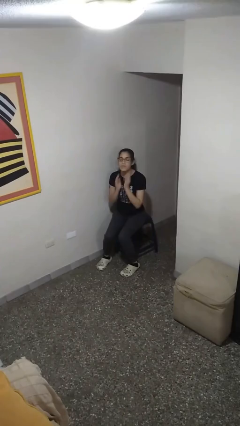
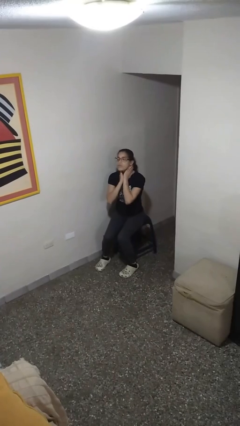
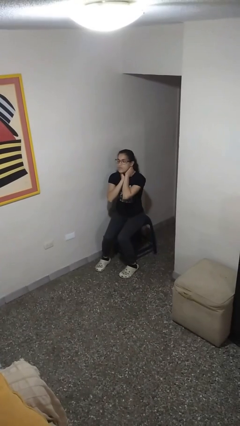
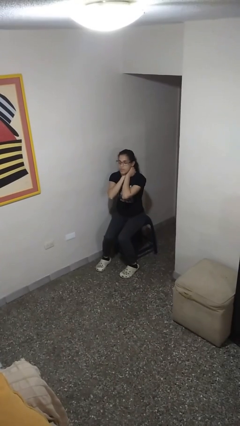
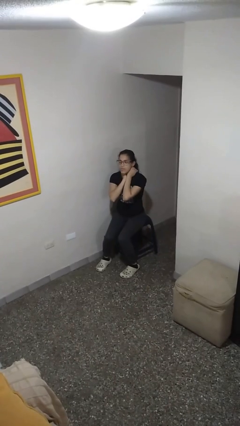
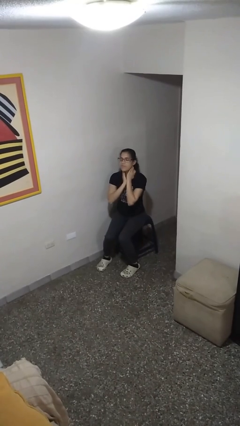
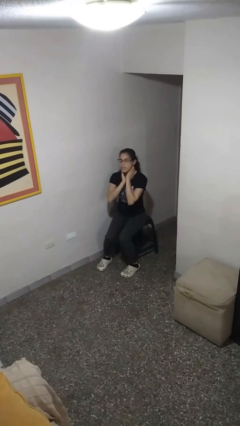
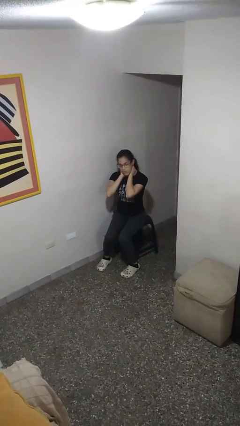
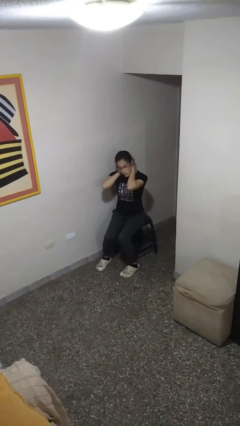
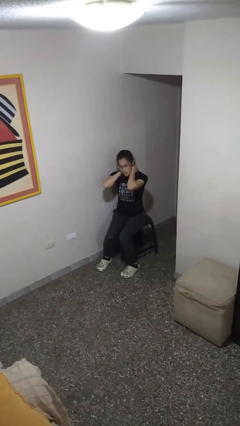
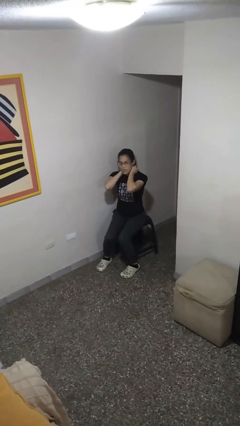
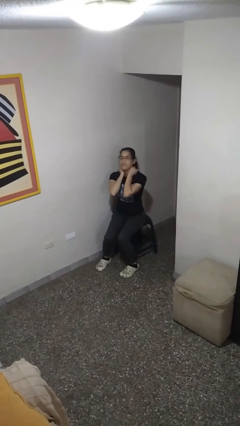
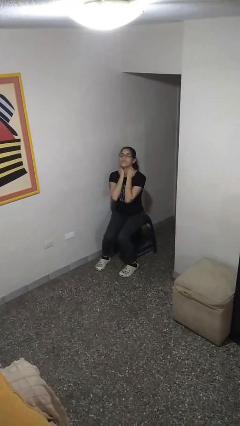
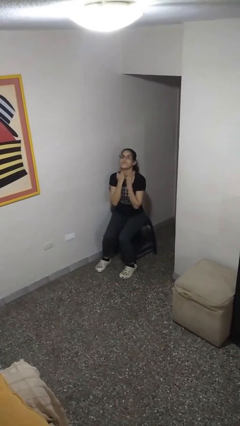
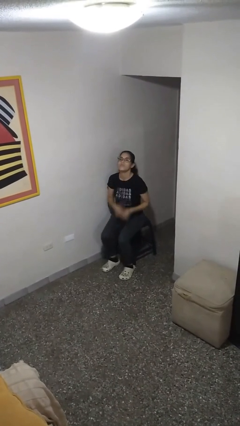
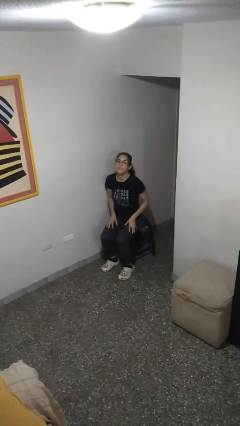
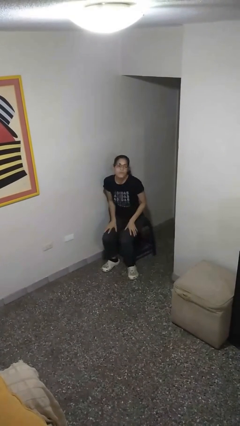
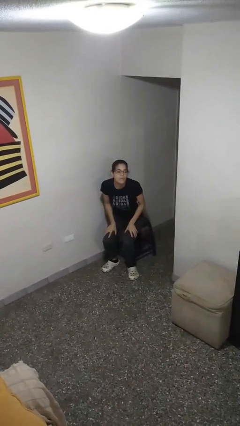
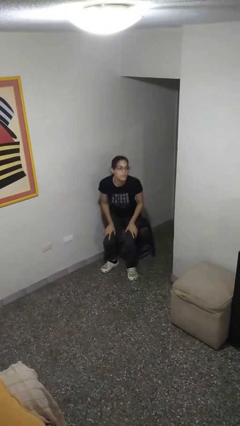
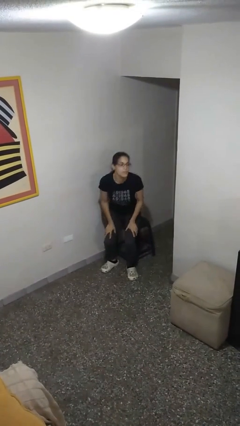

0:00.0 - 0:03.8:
person rubs neck

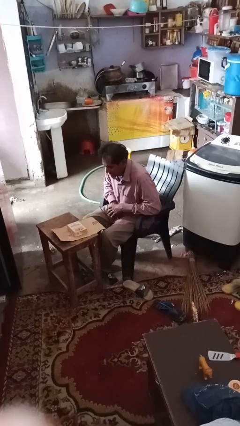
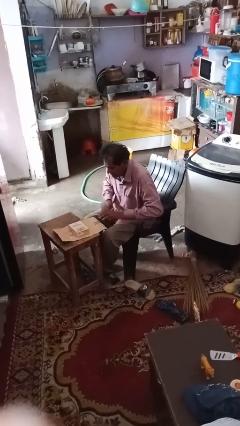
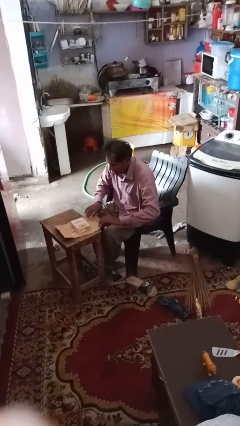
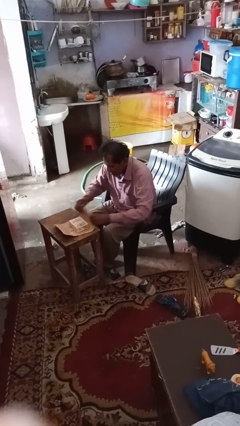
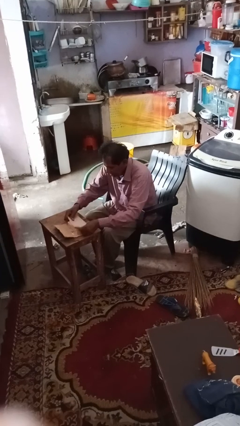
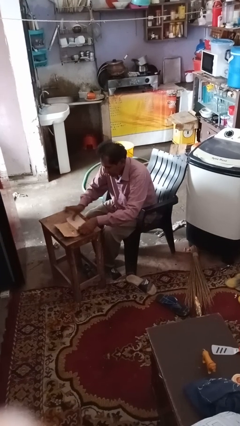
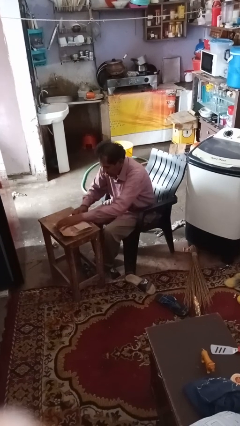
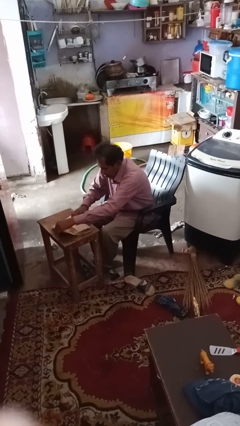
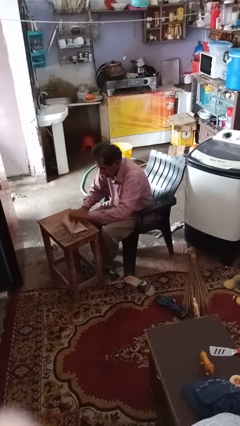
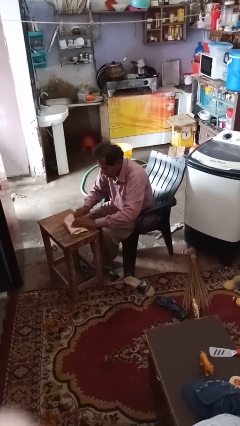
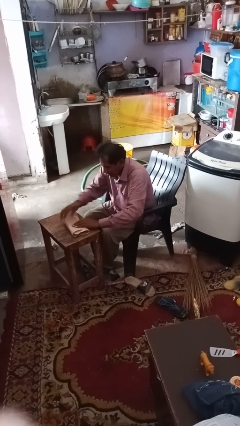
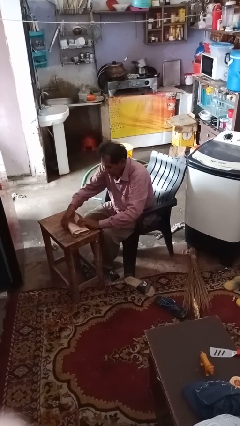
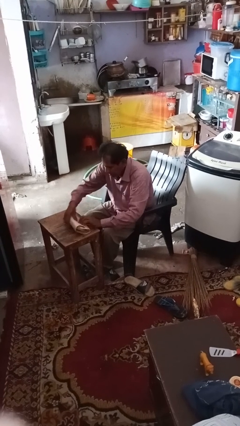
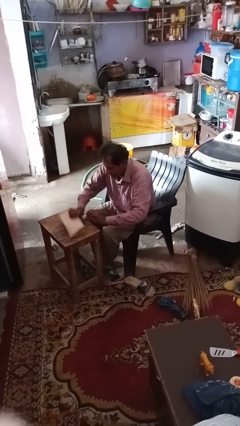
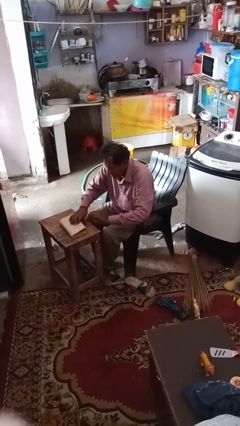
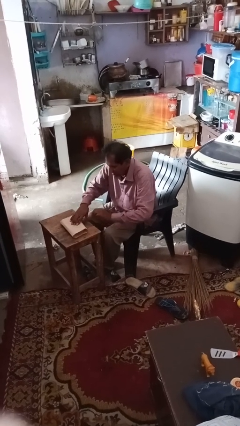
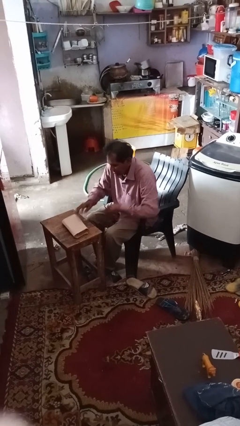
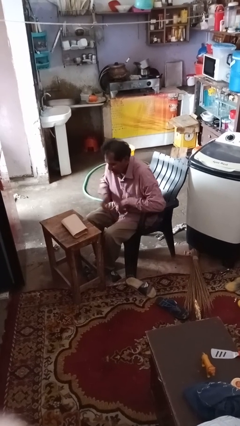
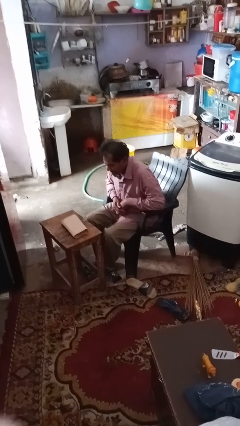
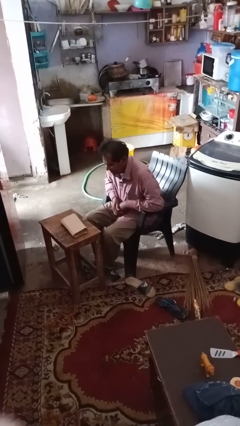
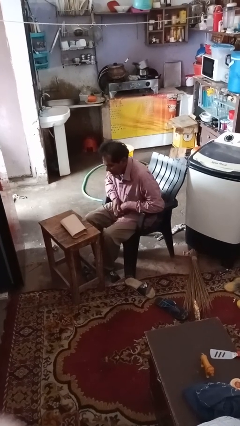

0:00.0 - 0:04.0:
person wraps box

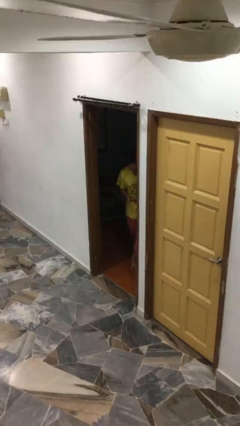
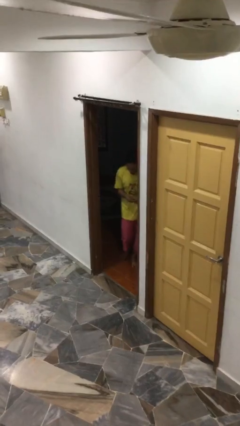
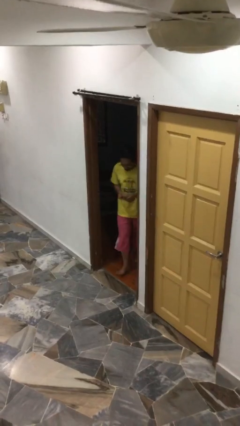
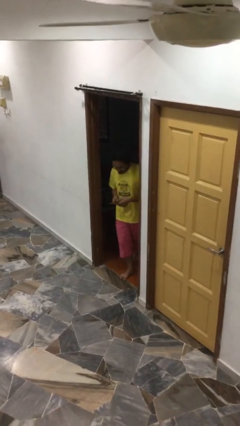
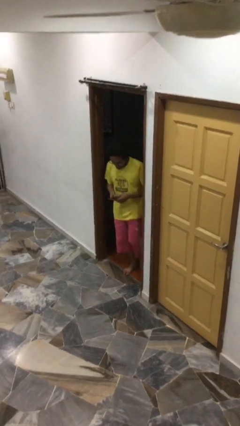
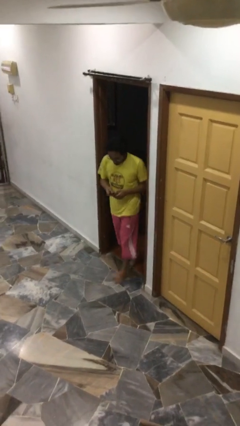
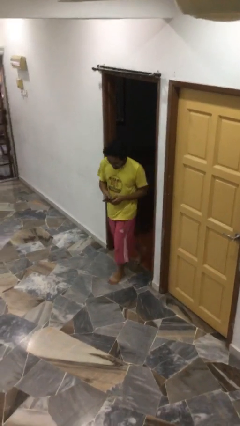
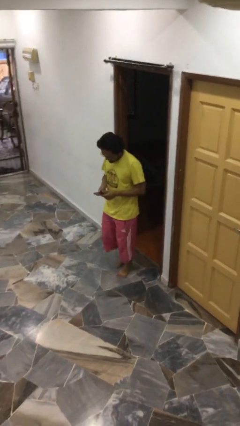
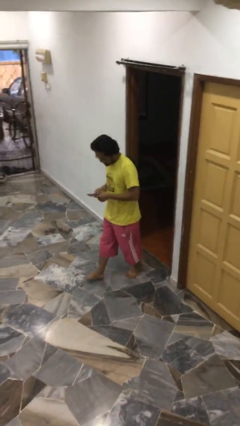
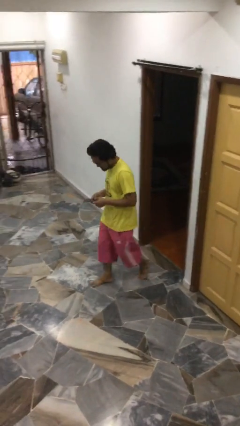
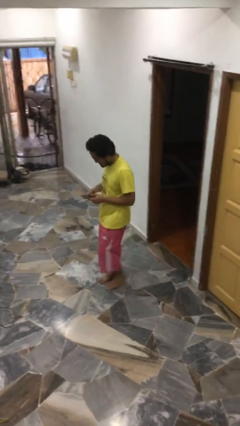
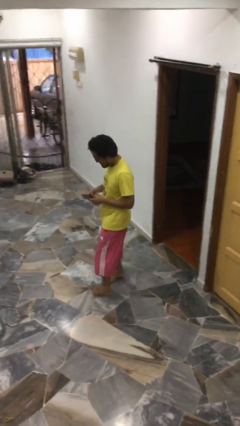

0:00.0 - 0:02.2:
person enters scene through structure

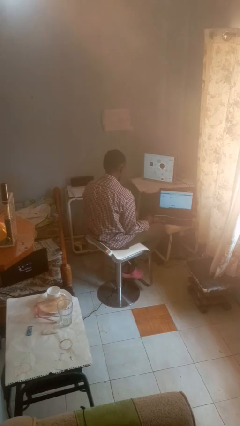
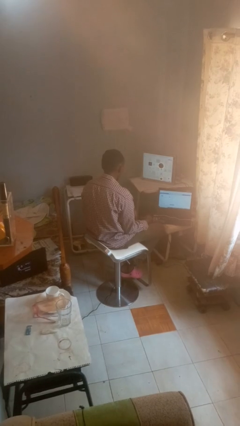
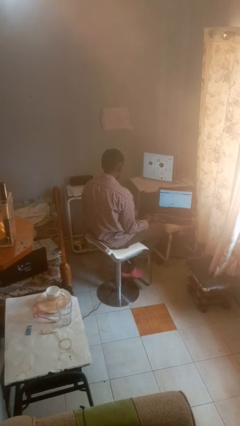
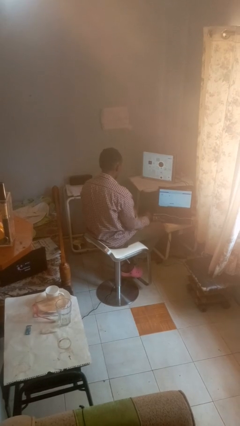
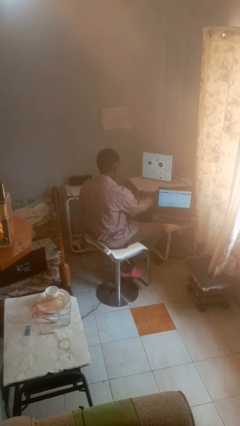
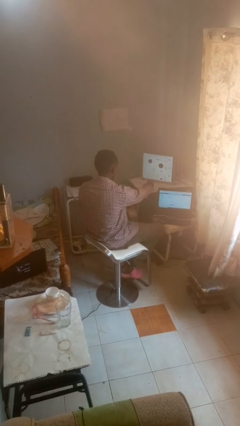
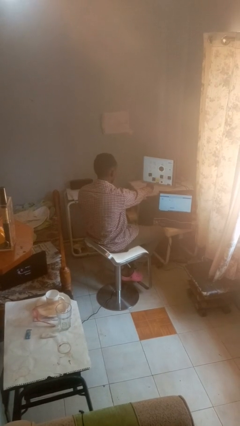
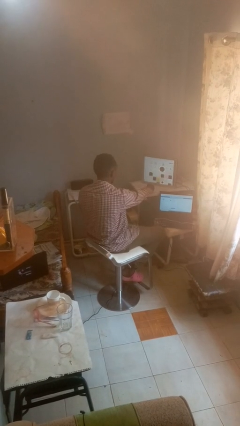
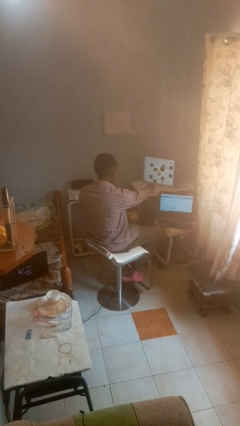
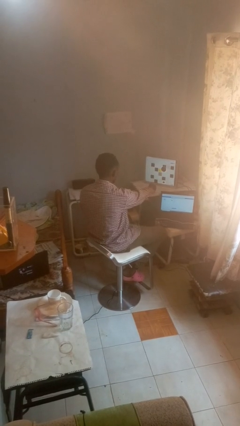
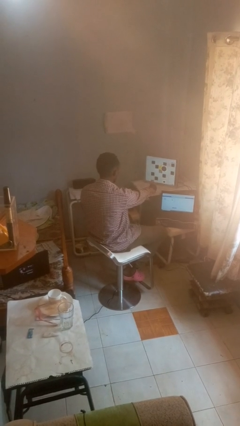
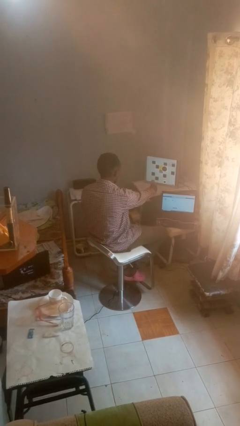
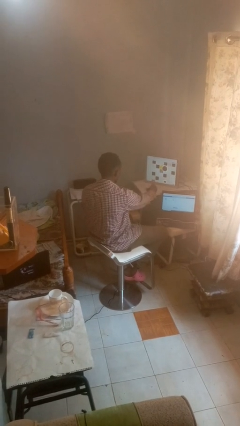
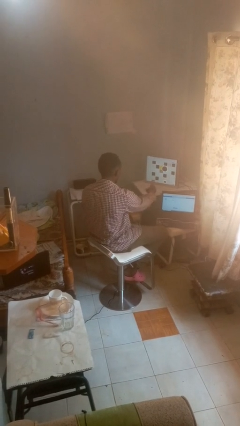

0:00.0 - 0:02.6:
person uses television remote

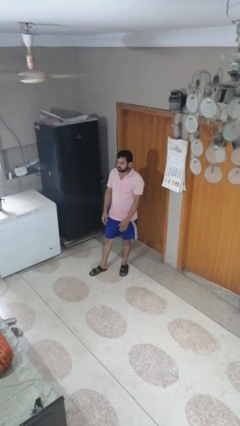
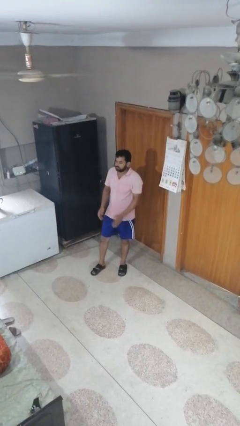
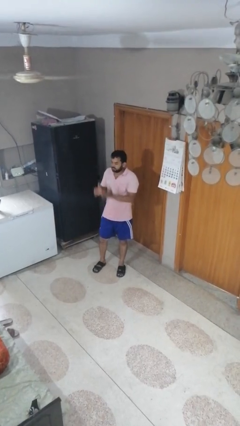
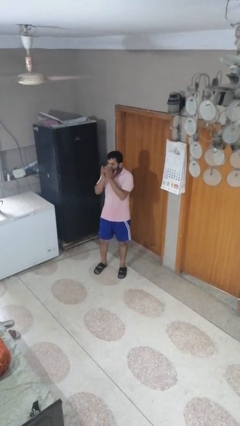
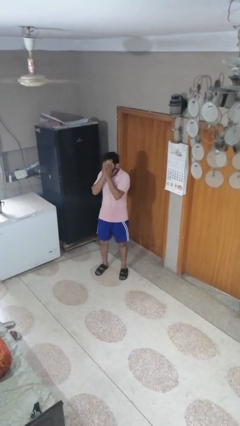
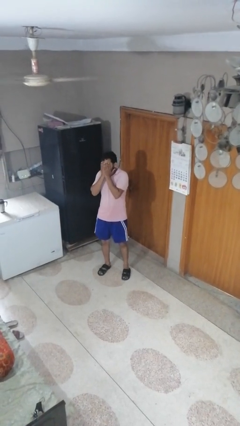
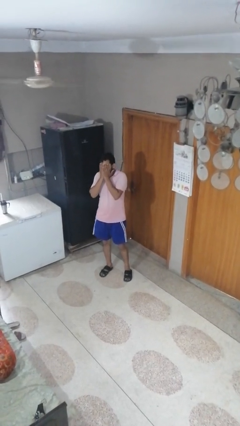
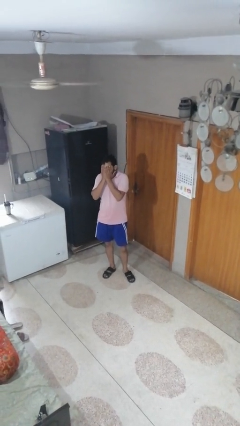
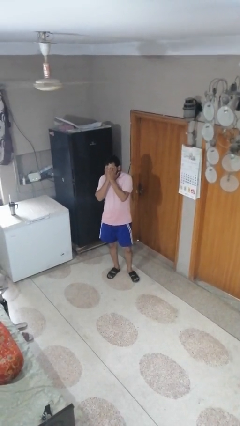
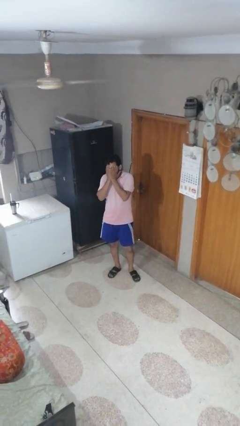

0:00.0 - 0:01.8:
person covers face with hands

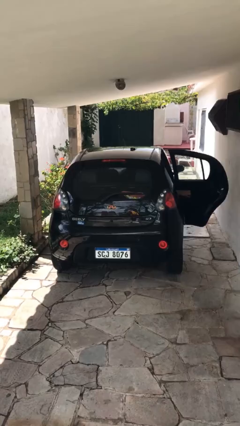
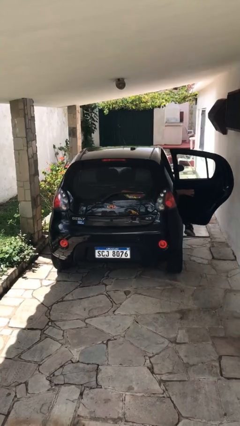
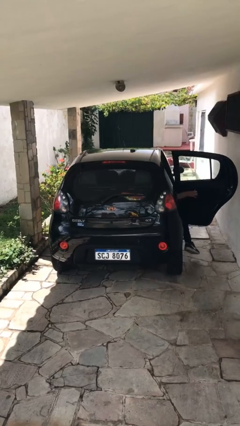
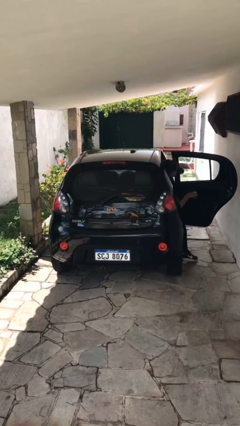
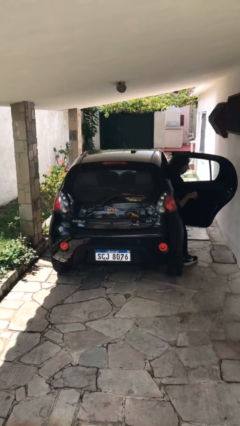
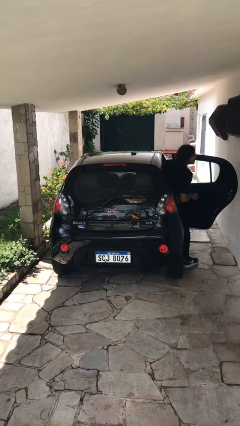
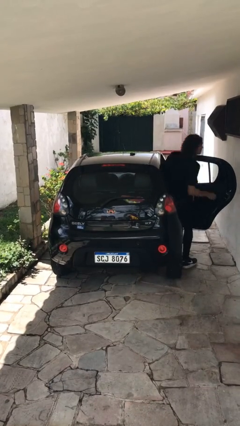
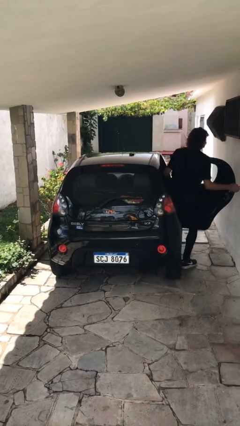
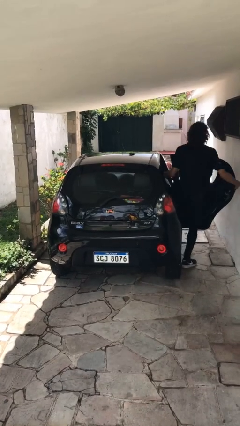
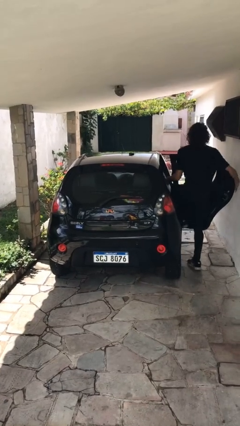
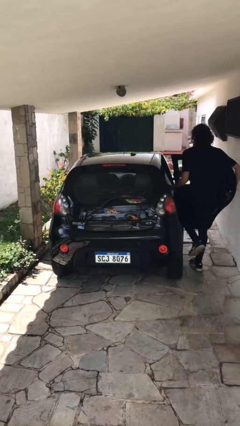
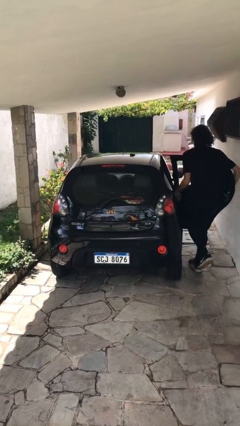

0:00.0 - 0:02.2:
car drops off person

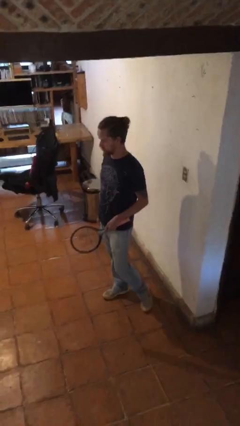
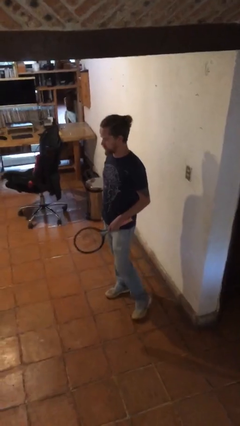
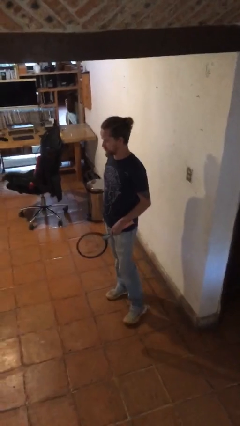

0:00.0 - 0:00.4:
person taps object with finger
